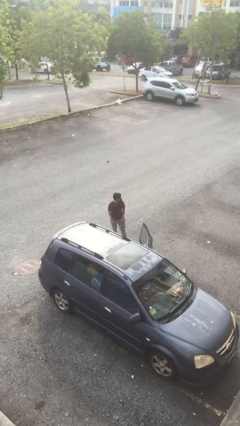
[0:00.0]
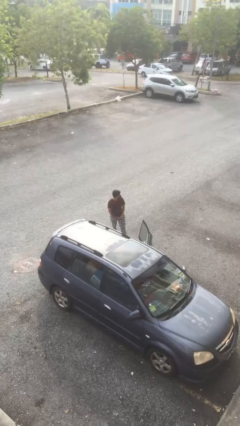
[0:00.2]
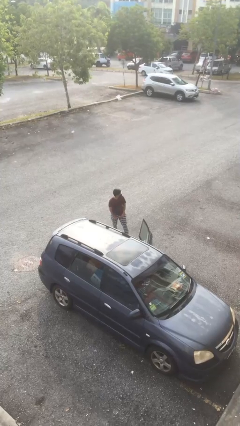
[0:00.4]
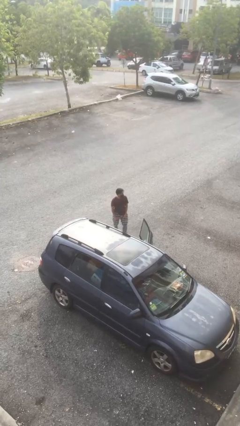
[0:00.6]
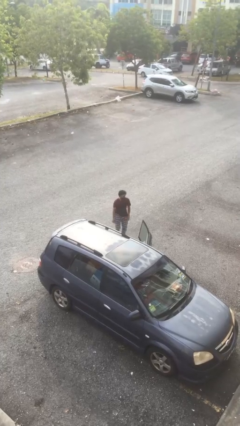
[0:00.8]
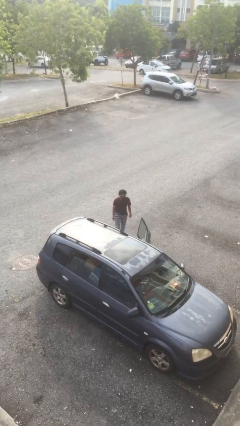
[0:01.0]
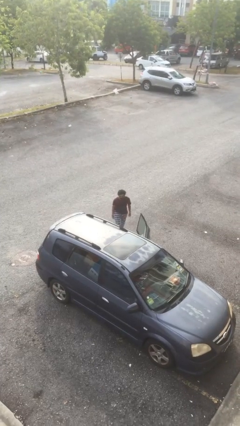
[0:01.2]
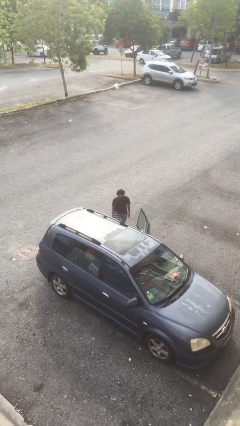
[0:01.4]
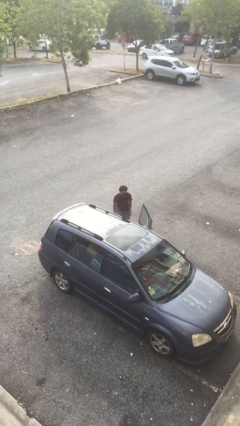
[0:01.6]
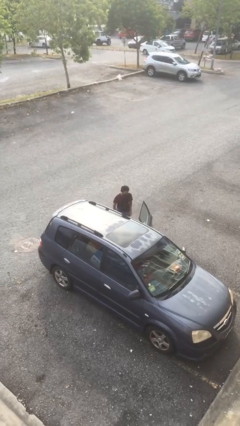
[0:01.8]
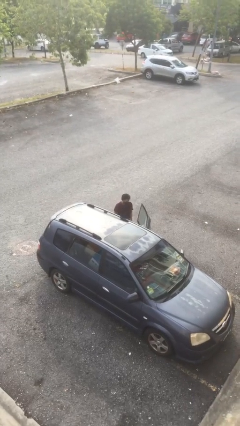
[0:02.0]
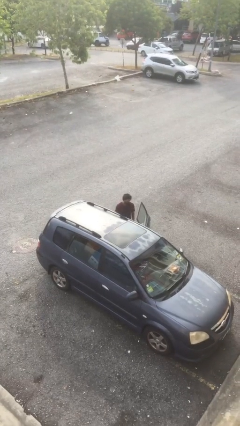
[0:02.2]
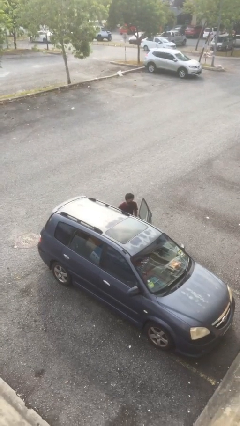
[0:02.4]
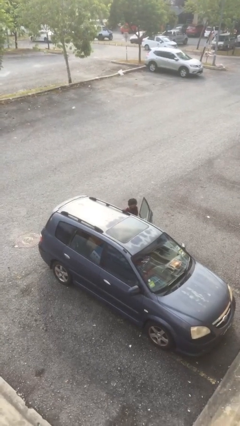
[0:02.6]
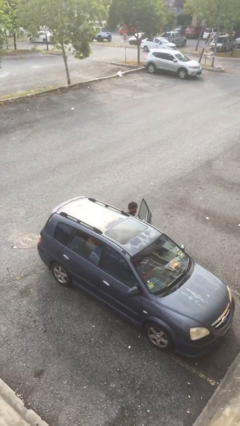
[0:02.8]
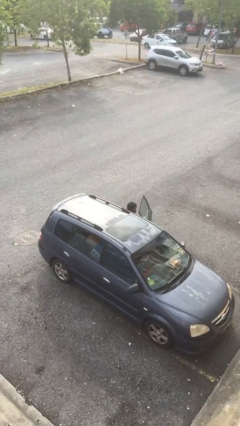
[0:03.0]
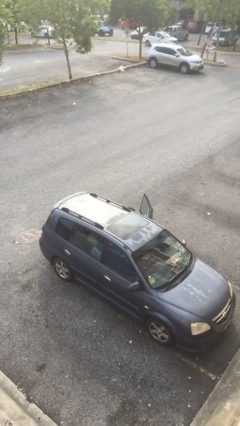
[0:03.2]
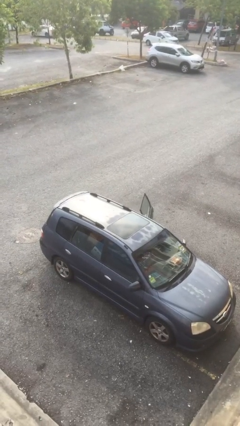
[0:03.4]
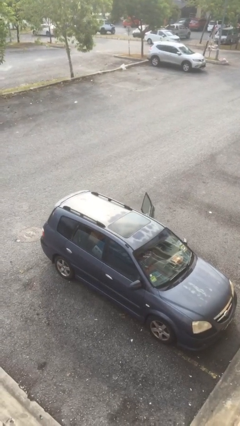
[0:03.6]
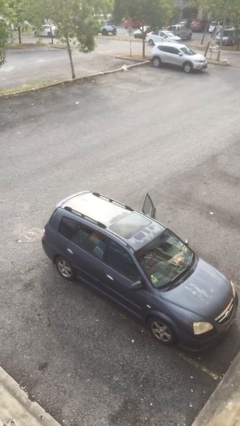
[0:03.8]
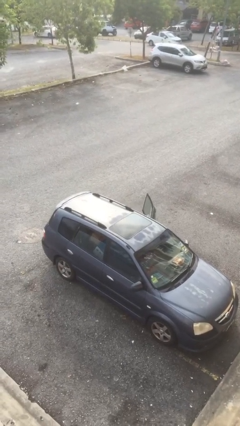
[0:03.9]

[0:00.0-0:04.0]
person enters car

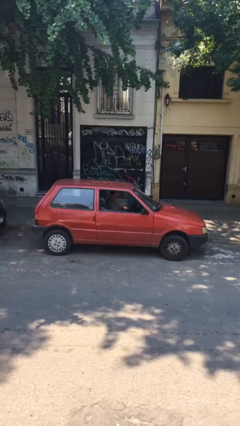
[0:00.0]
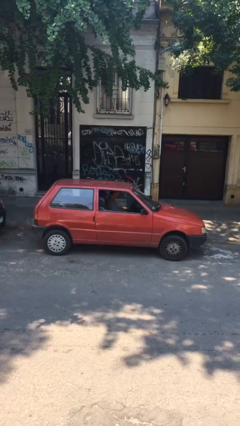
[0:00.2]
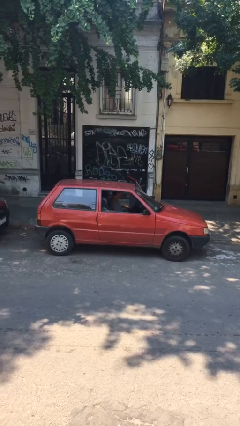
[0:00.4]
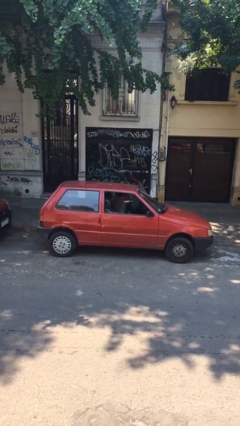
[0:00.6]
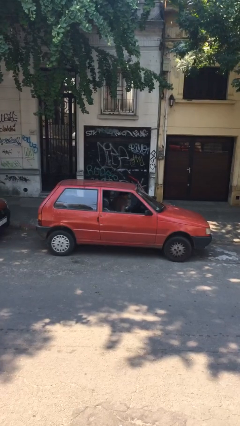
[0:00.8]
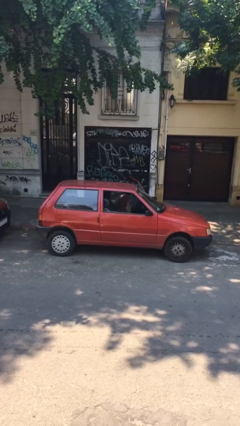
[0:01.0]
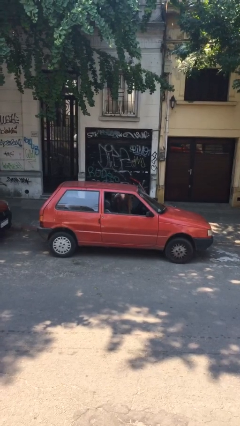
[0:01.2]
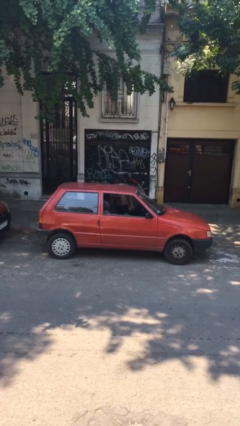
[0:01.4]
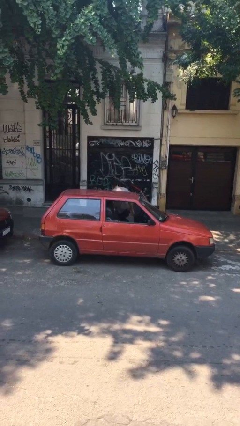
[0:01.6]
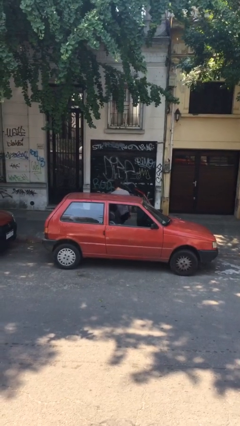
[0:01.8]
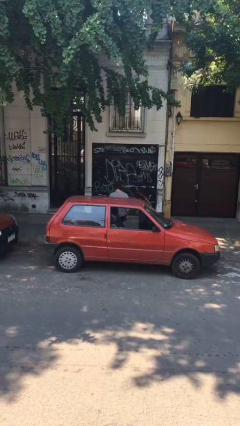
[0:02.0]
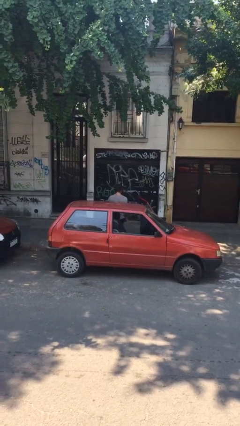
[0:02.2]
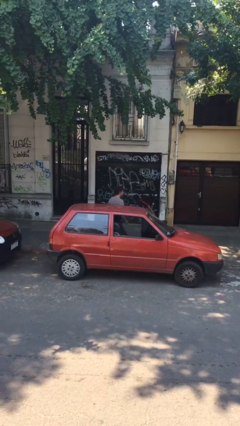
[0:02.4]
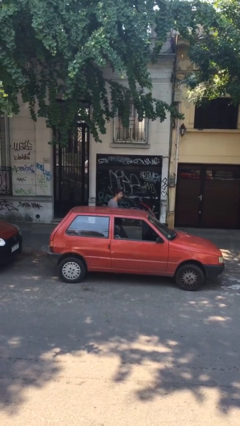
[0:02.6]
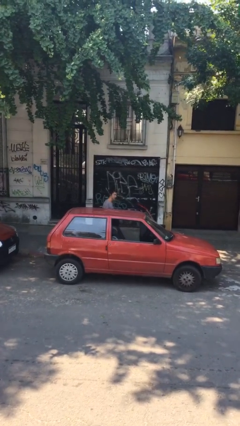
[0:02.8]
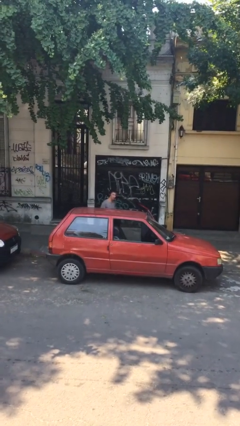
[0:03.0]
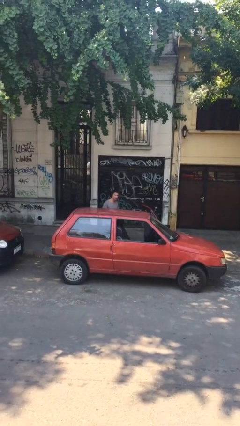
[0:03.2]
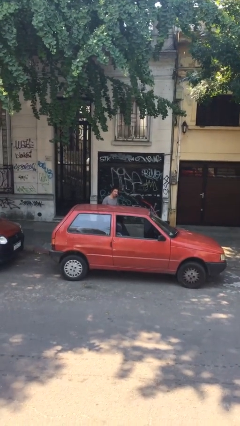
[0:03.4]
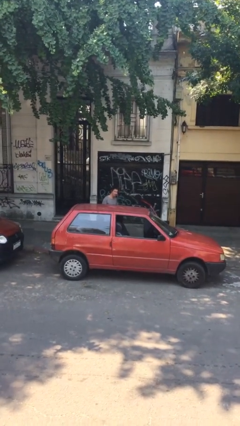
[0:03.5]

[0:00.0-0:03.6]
person exits car

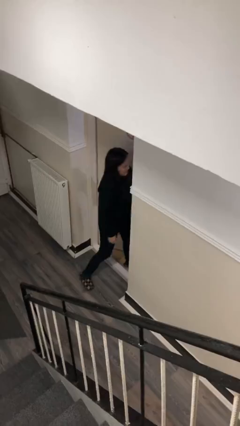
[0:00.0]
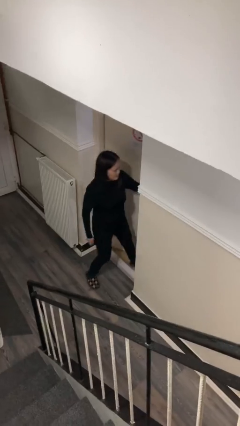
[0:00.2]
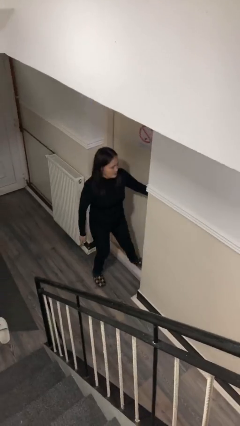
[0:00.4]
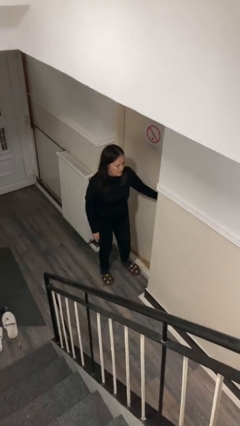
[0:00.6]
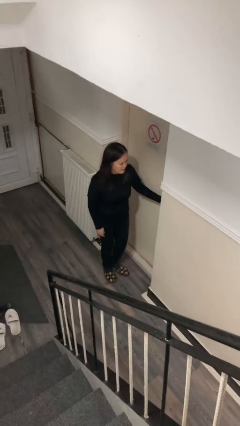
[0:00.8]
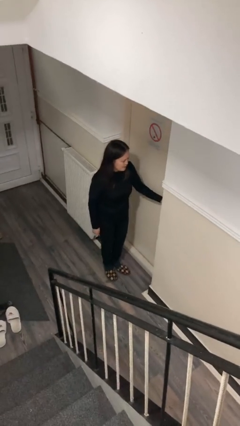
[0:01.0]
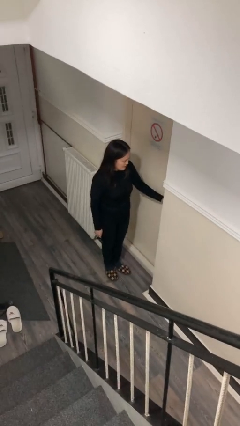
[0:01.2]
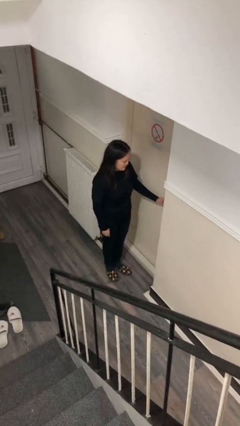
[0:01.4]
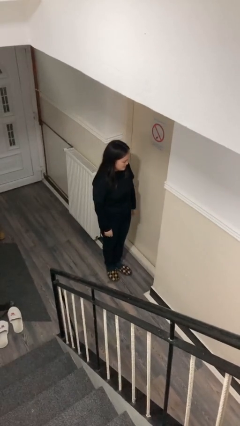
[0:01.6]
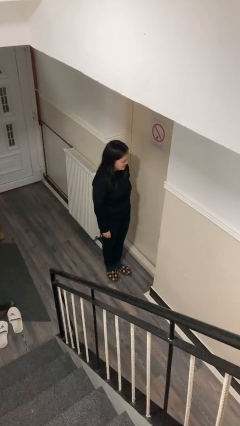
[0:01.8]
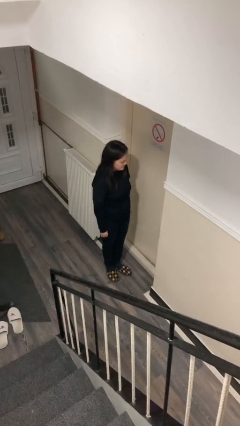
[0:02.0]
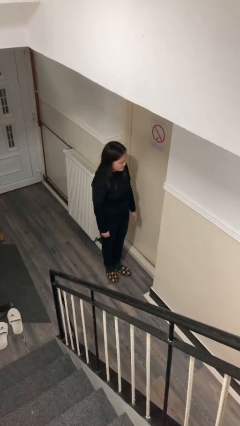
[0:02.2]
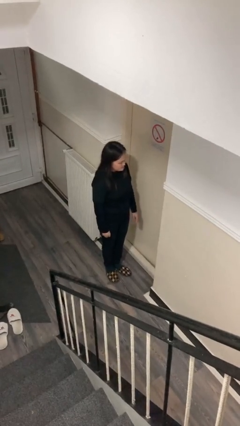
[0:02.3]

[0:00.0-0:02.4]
person closes facility door

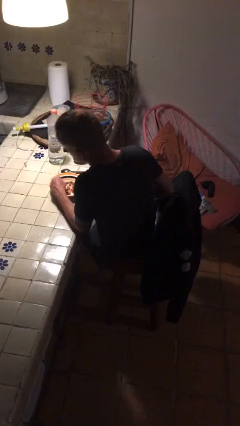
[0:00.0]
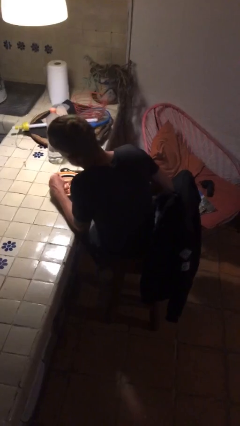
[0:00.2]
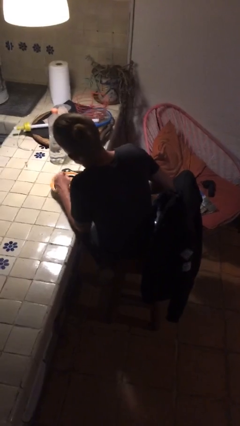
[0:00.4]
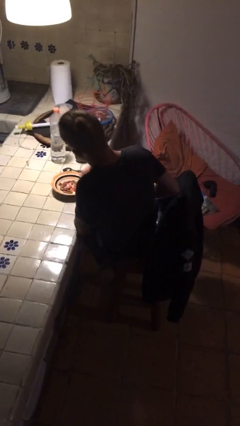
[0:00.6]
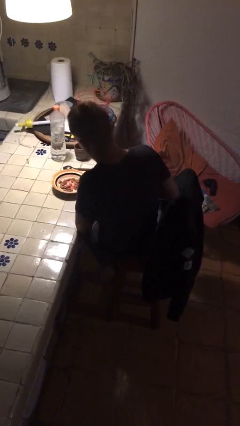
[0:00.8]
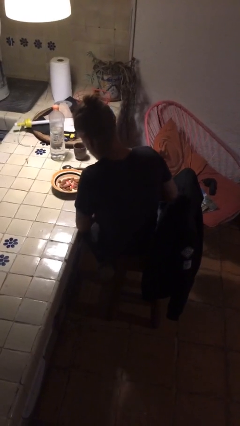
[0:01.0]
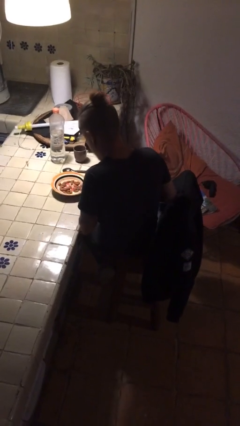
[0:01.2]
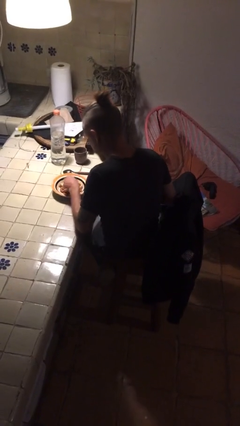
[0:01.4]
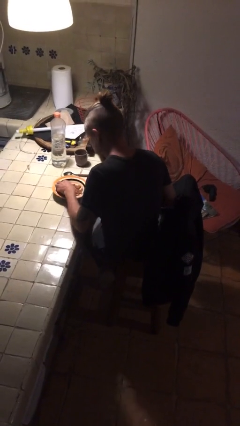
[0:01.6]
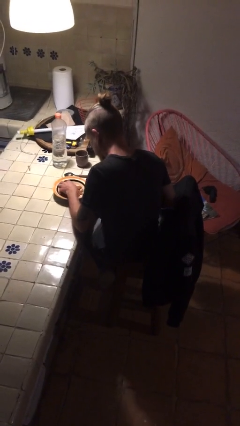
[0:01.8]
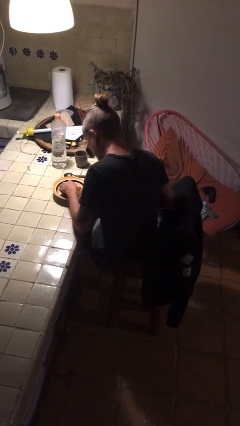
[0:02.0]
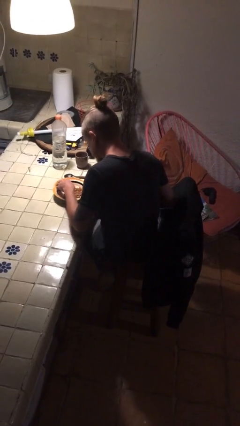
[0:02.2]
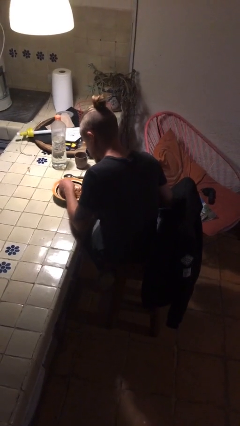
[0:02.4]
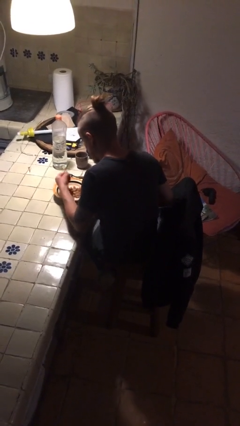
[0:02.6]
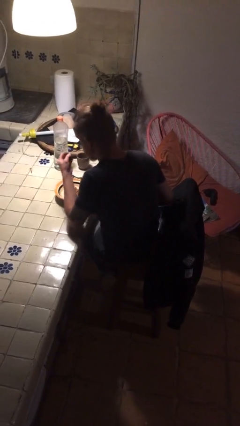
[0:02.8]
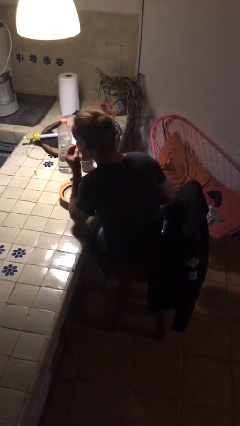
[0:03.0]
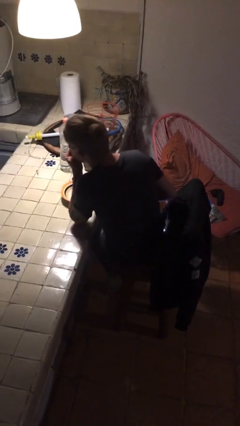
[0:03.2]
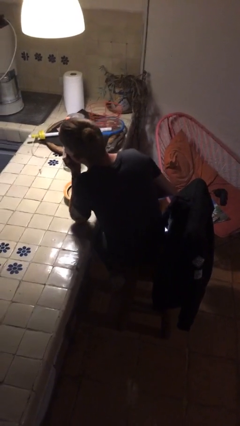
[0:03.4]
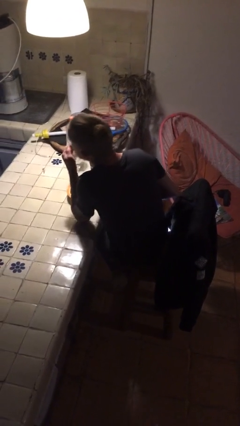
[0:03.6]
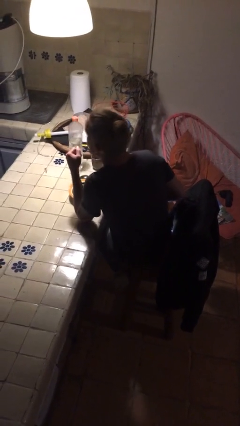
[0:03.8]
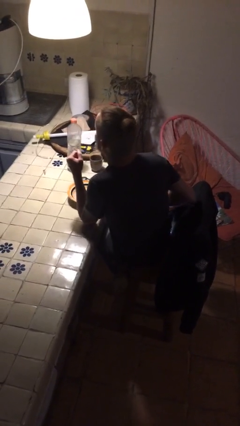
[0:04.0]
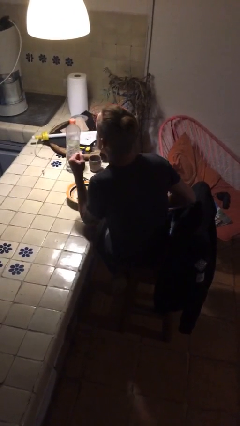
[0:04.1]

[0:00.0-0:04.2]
person eats with hands

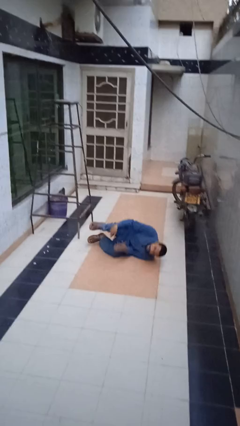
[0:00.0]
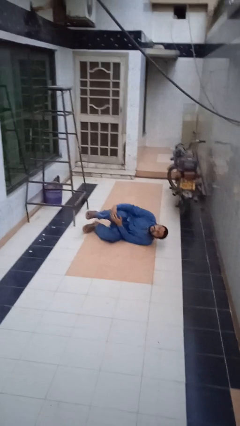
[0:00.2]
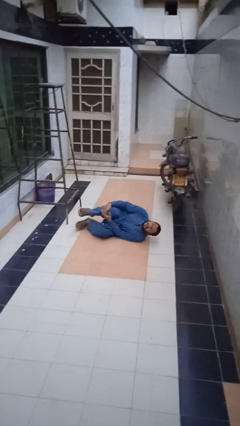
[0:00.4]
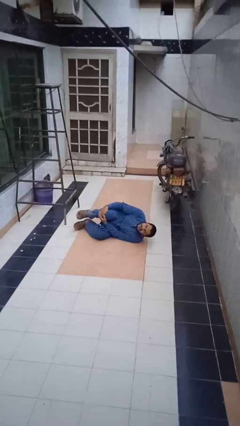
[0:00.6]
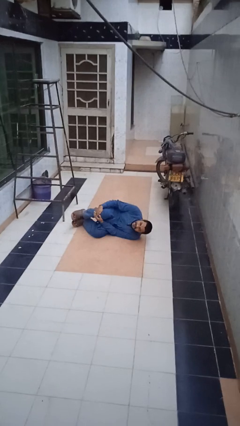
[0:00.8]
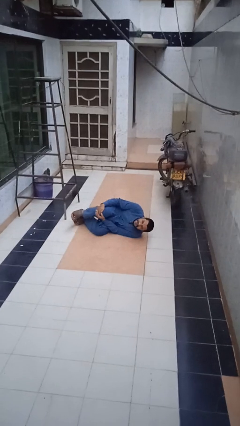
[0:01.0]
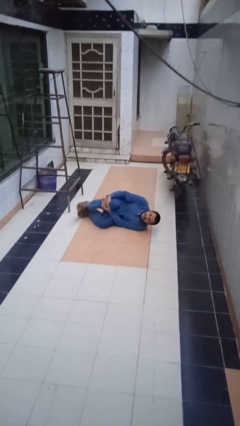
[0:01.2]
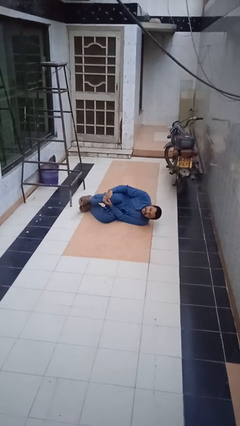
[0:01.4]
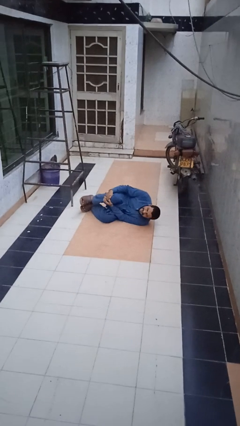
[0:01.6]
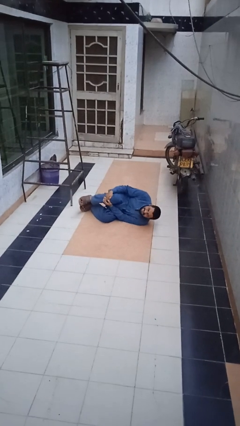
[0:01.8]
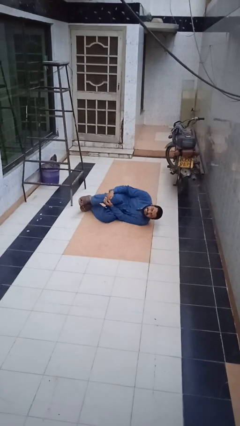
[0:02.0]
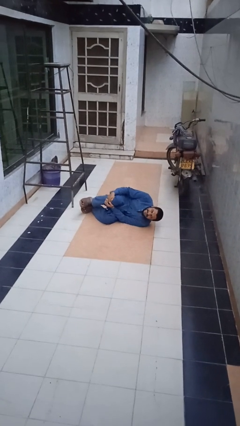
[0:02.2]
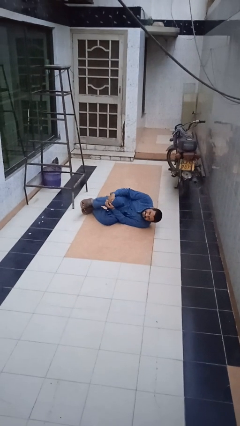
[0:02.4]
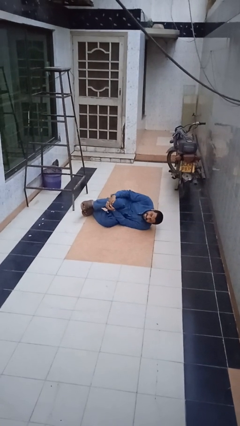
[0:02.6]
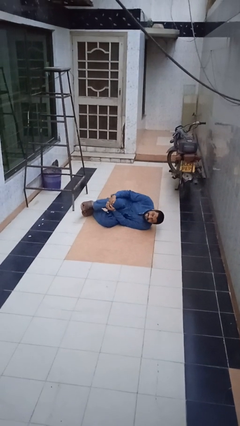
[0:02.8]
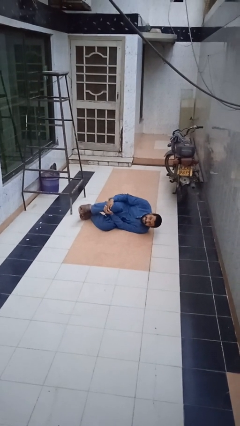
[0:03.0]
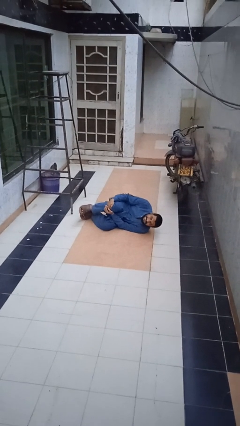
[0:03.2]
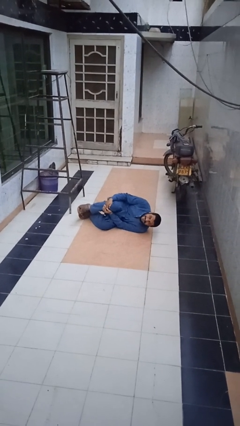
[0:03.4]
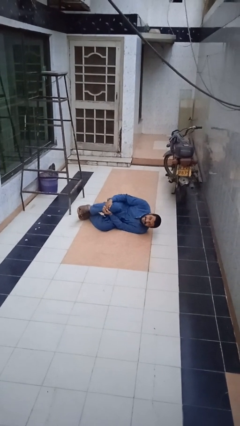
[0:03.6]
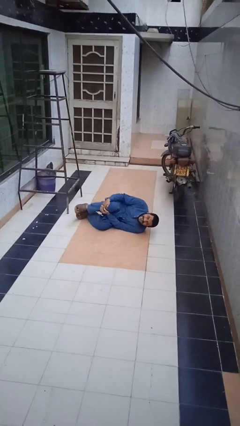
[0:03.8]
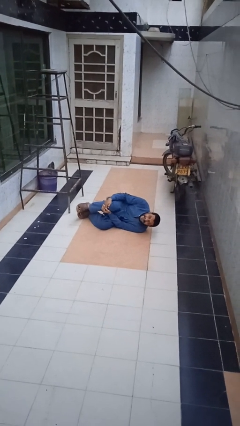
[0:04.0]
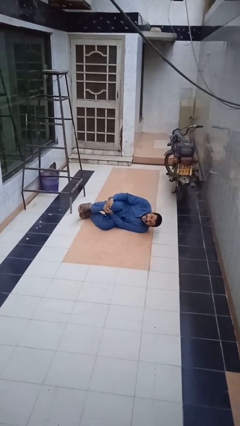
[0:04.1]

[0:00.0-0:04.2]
person lies down on floor
